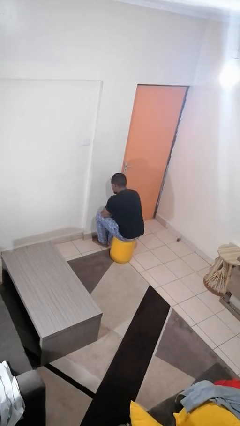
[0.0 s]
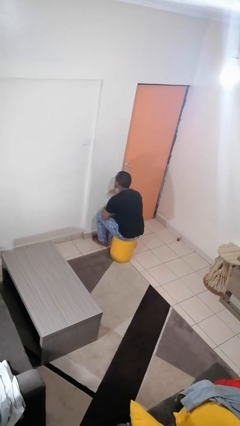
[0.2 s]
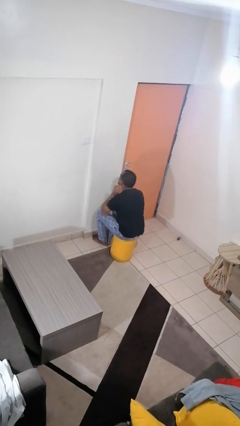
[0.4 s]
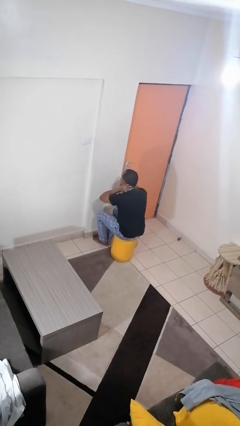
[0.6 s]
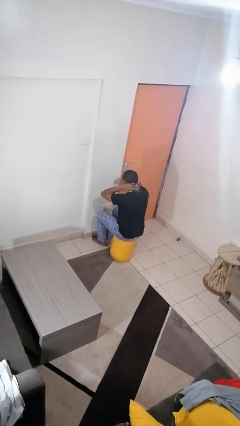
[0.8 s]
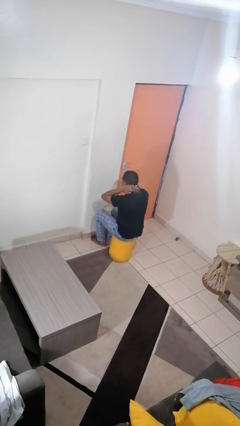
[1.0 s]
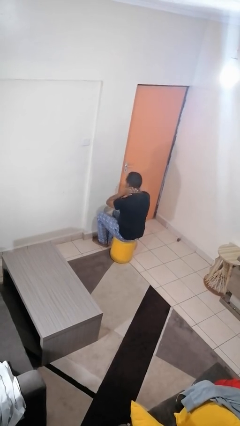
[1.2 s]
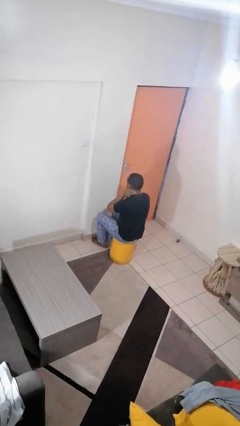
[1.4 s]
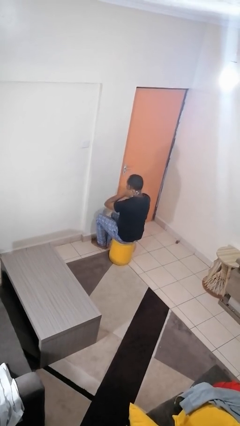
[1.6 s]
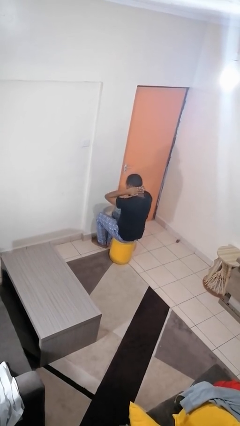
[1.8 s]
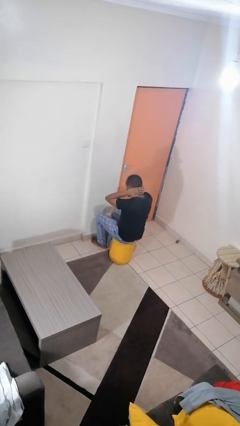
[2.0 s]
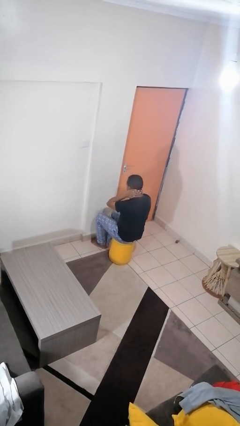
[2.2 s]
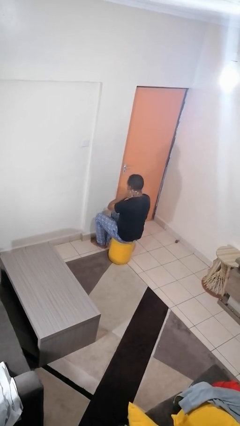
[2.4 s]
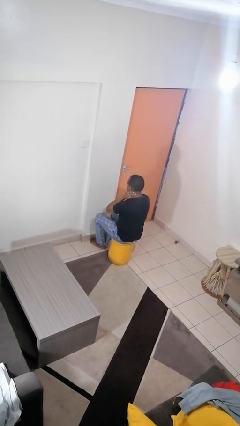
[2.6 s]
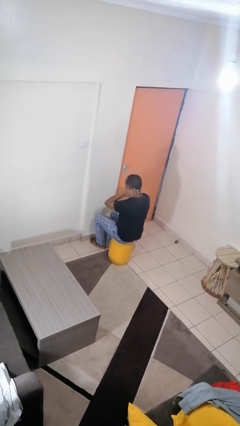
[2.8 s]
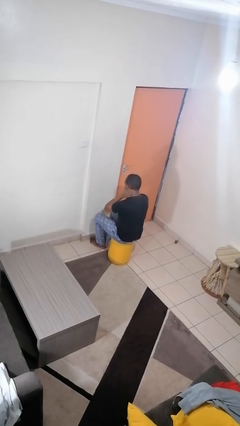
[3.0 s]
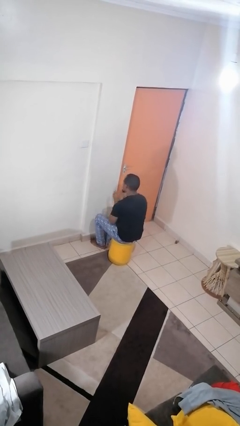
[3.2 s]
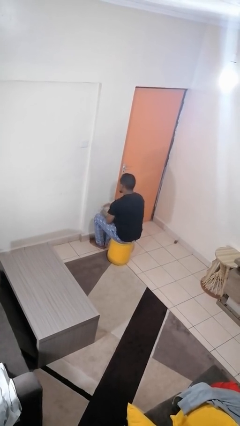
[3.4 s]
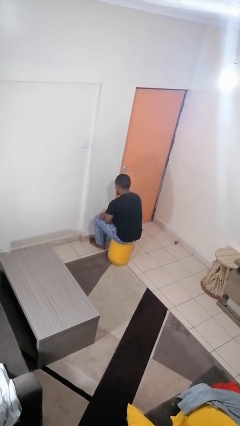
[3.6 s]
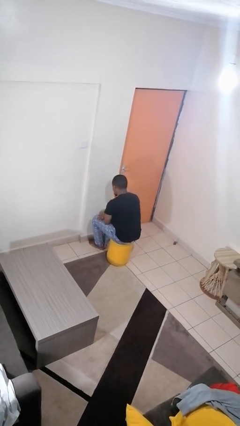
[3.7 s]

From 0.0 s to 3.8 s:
person rubs neck

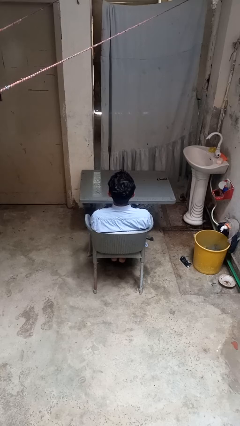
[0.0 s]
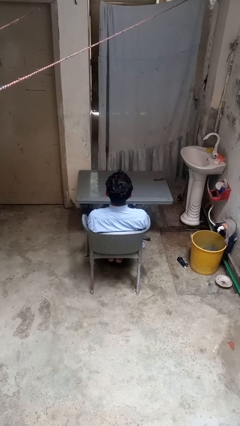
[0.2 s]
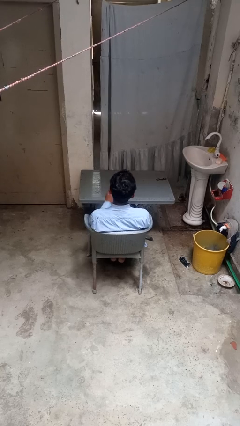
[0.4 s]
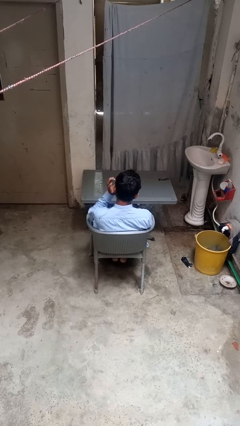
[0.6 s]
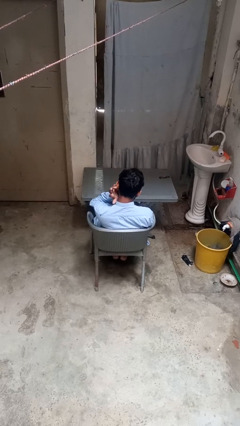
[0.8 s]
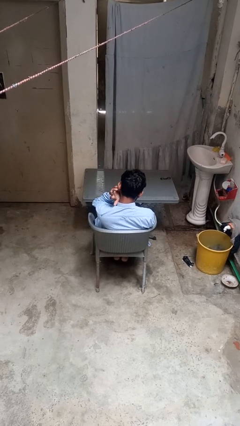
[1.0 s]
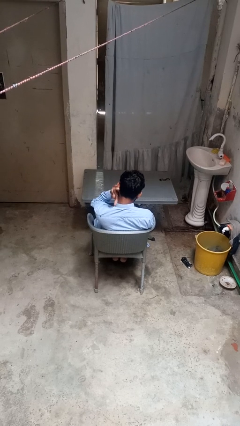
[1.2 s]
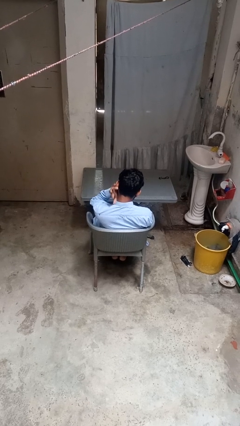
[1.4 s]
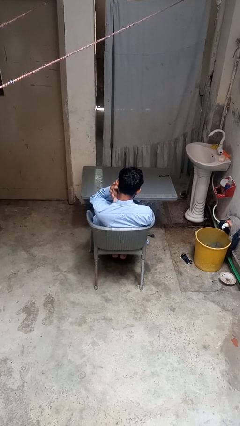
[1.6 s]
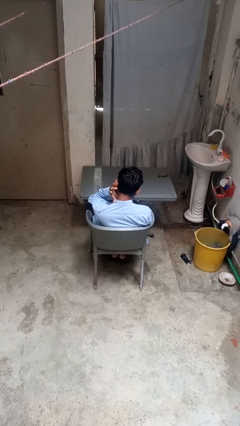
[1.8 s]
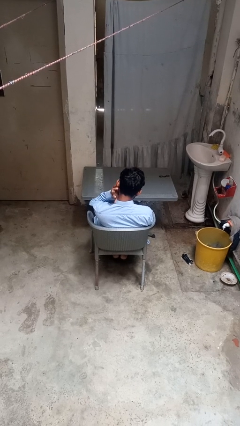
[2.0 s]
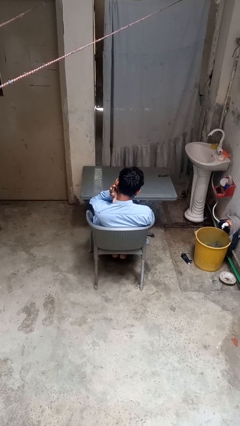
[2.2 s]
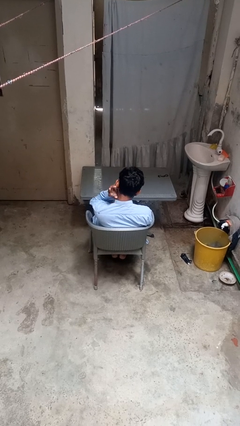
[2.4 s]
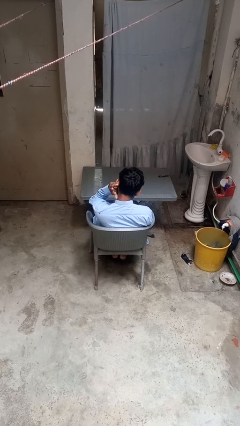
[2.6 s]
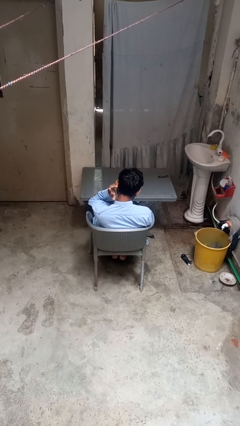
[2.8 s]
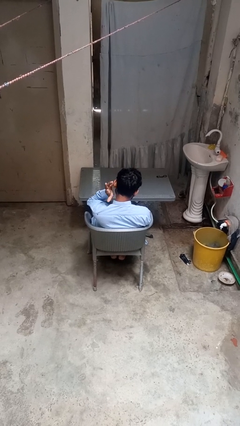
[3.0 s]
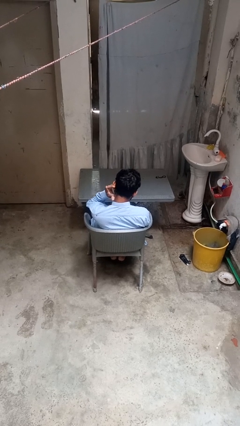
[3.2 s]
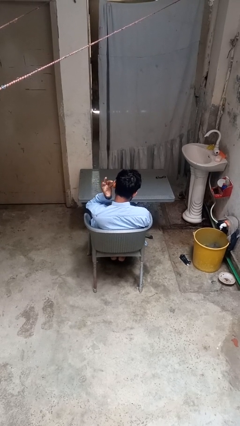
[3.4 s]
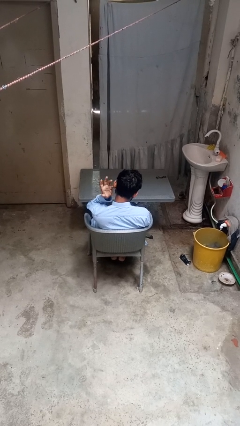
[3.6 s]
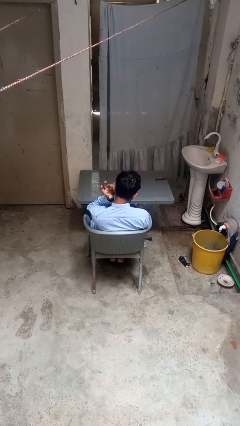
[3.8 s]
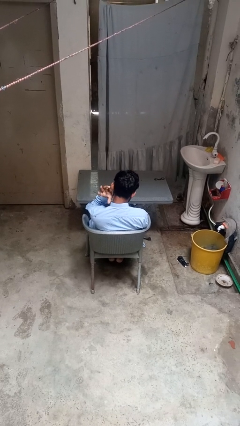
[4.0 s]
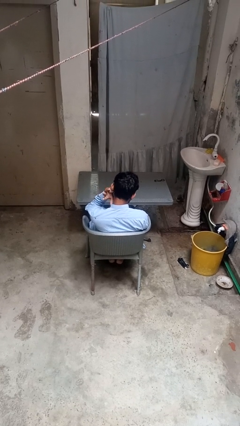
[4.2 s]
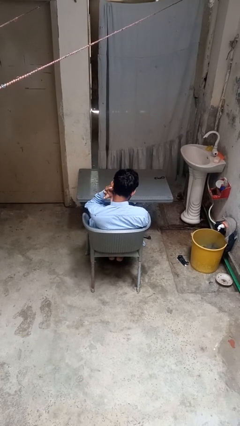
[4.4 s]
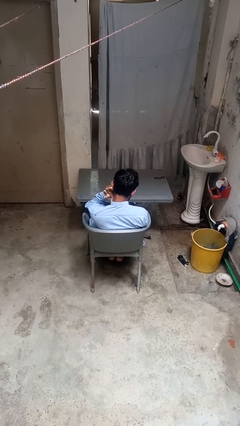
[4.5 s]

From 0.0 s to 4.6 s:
person puts fingers in ear

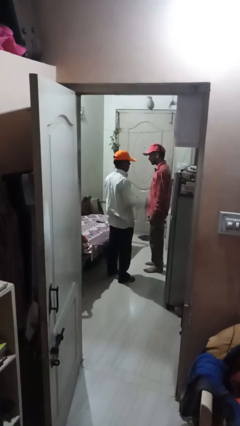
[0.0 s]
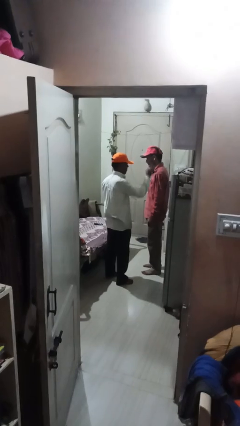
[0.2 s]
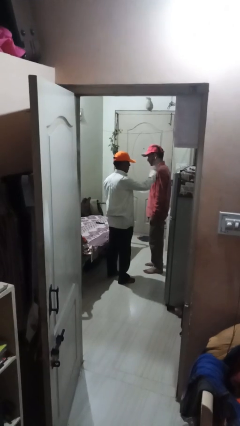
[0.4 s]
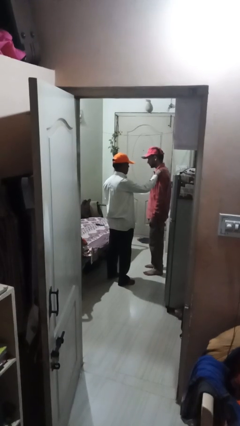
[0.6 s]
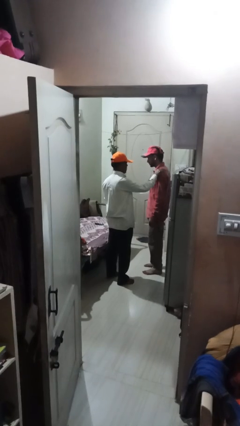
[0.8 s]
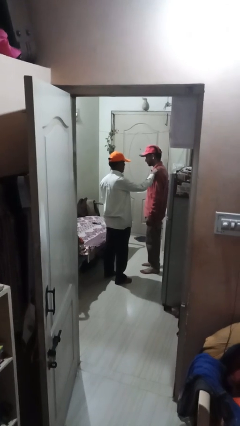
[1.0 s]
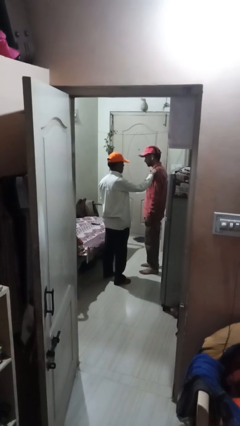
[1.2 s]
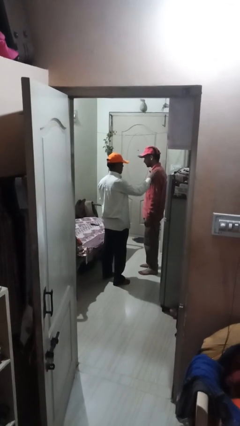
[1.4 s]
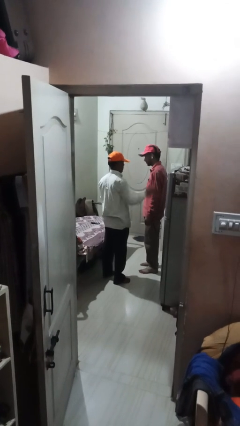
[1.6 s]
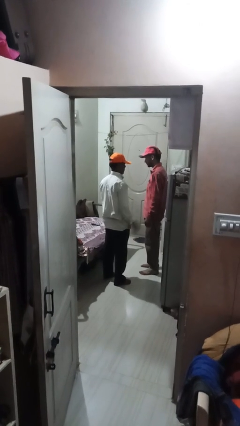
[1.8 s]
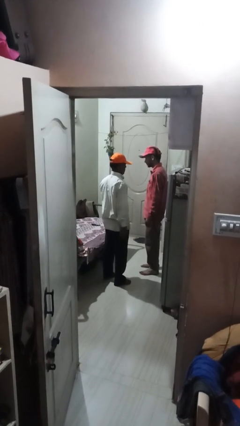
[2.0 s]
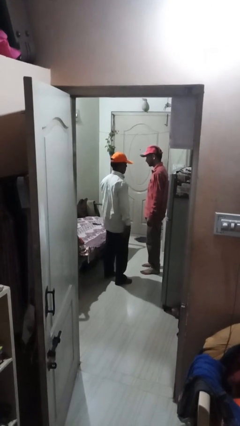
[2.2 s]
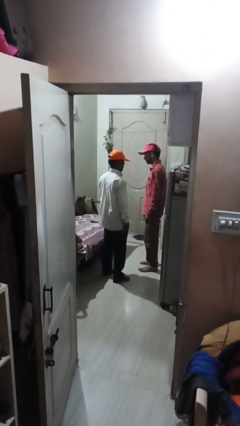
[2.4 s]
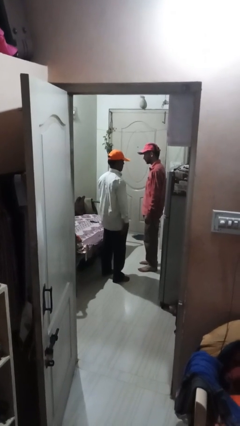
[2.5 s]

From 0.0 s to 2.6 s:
person pounds shoulders of person

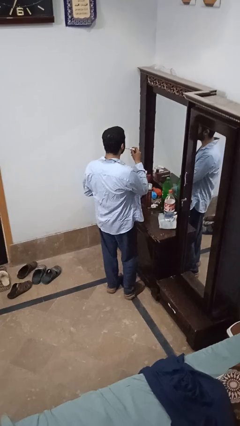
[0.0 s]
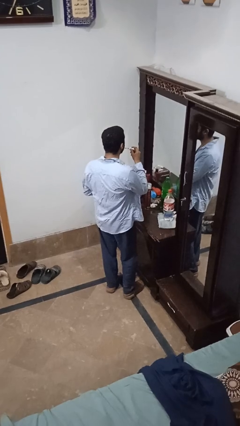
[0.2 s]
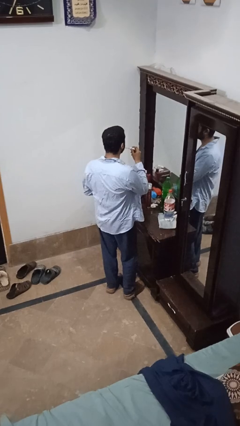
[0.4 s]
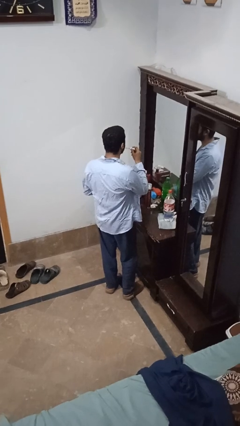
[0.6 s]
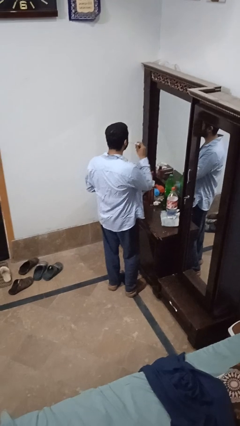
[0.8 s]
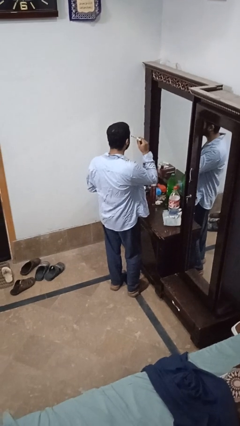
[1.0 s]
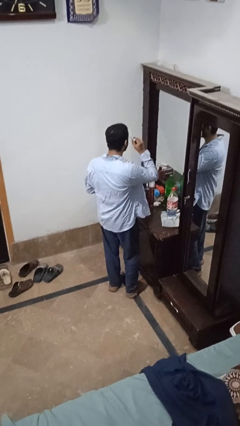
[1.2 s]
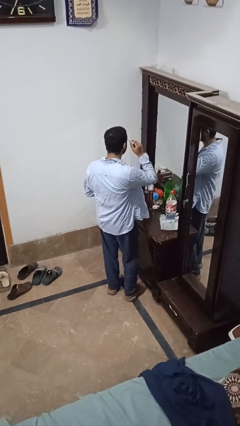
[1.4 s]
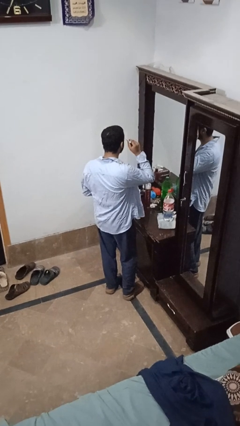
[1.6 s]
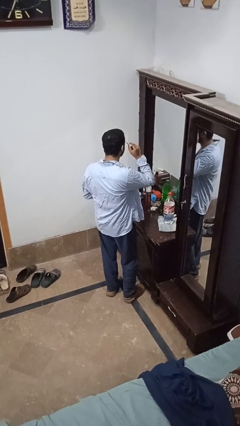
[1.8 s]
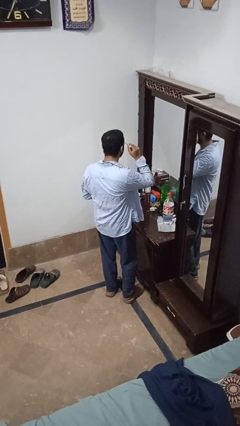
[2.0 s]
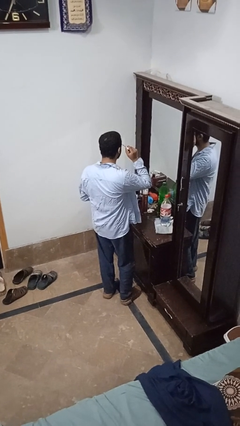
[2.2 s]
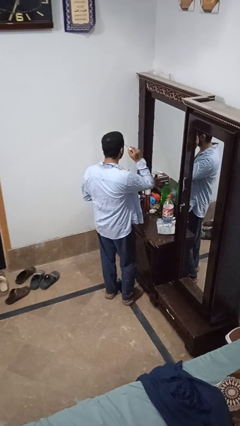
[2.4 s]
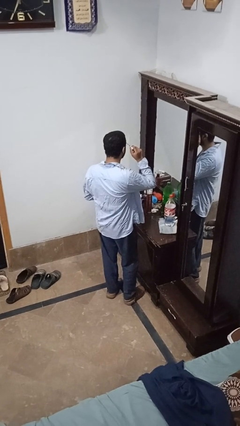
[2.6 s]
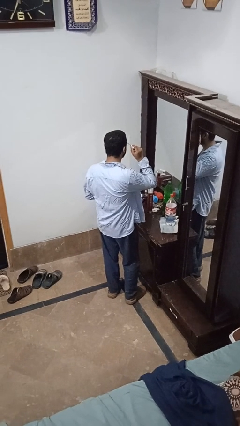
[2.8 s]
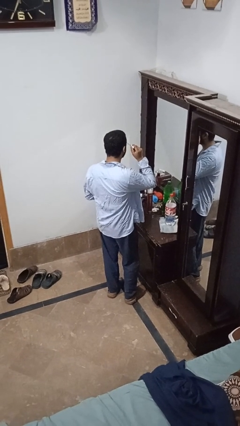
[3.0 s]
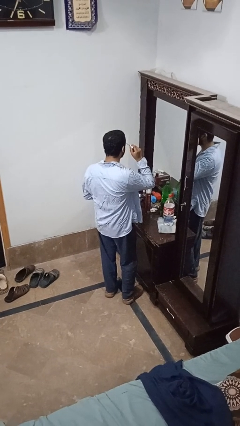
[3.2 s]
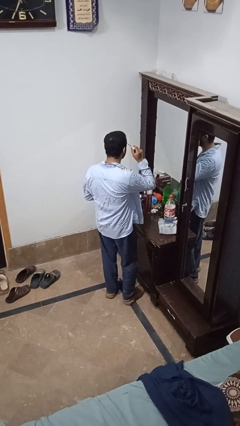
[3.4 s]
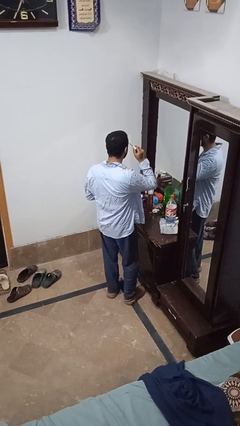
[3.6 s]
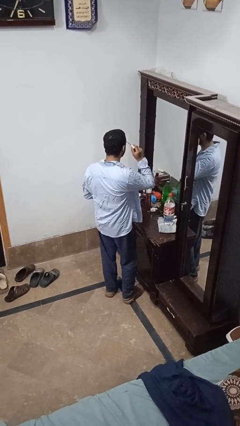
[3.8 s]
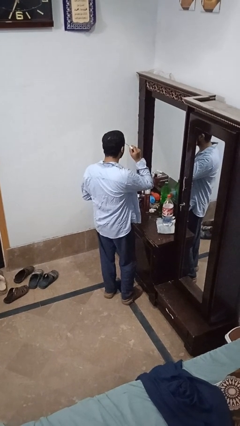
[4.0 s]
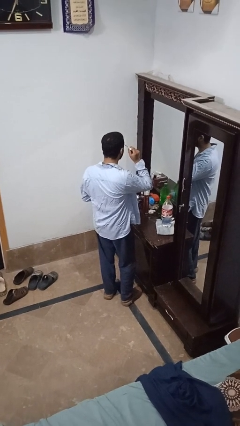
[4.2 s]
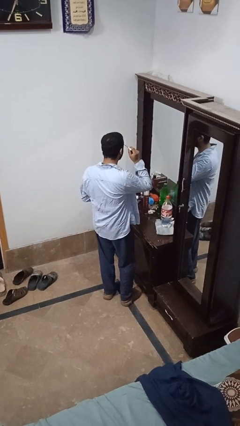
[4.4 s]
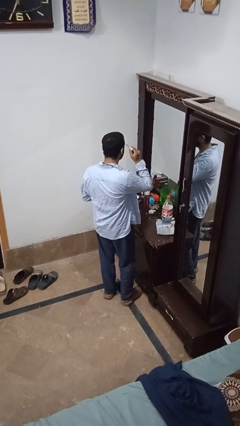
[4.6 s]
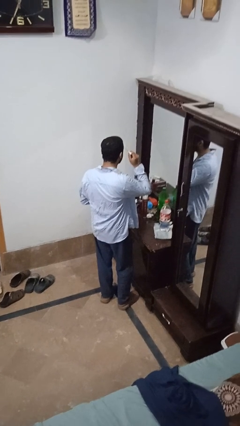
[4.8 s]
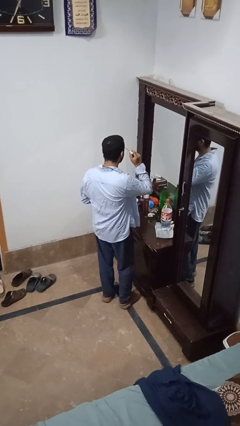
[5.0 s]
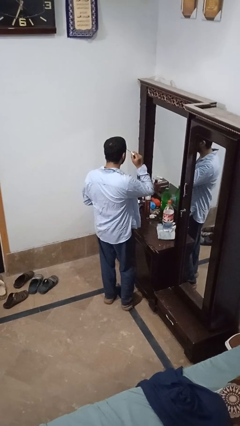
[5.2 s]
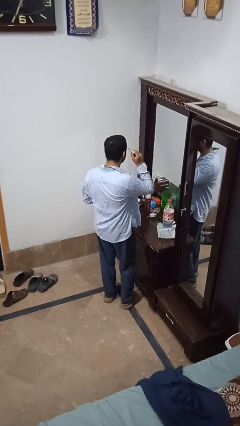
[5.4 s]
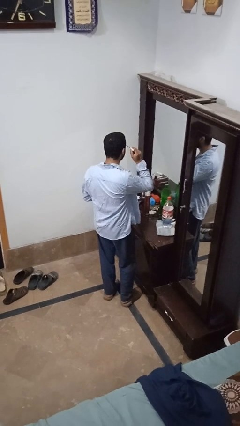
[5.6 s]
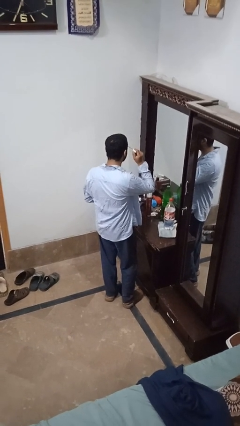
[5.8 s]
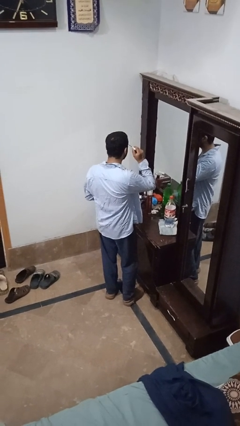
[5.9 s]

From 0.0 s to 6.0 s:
person applies eye makeup

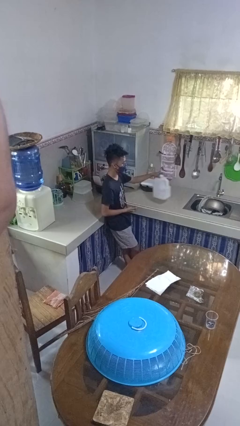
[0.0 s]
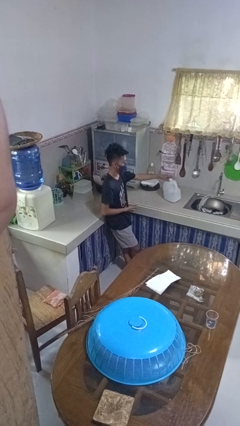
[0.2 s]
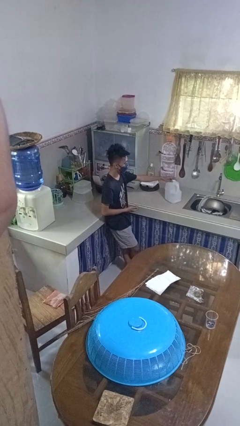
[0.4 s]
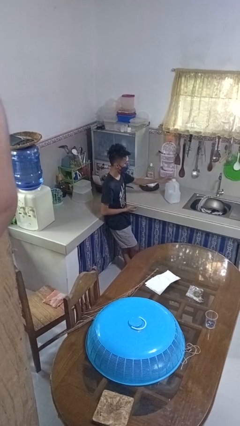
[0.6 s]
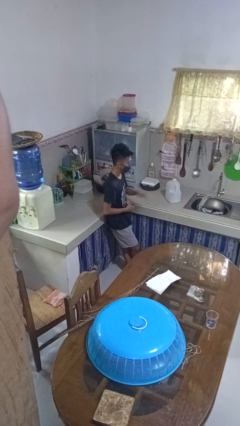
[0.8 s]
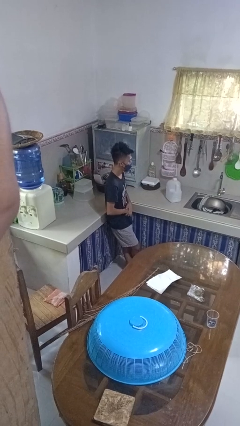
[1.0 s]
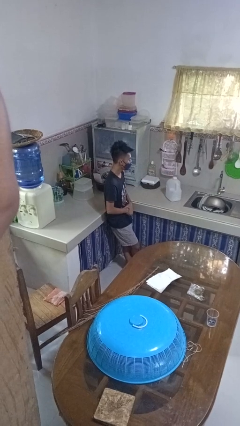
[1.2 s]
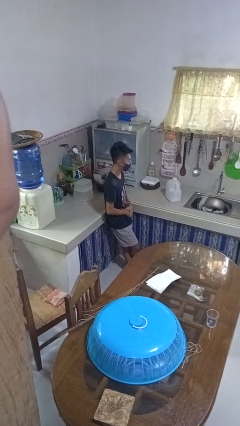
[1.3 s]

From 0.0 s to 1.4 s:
person puts down object on countertop
